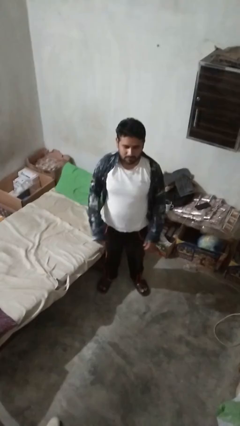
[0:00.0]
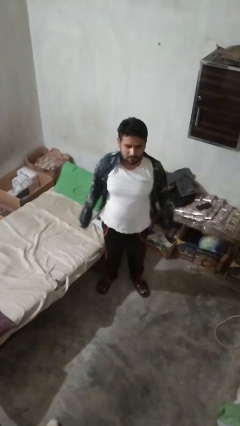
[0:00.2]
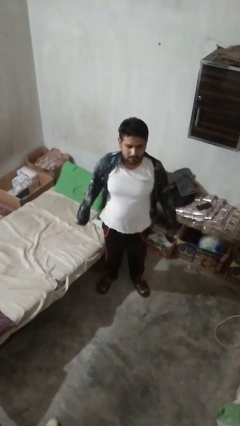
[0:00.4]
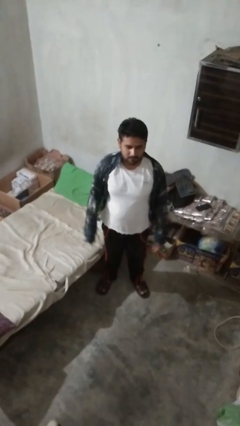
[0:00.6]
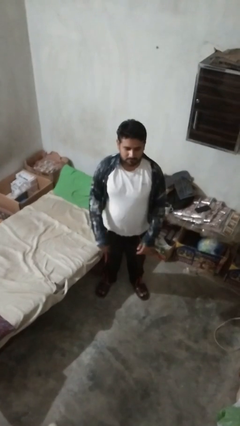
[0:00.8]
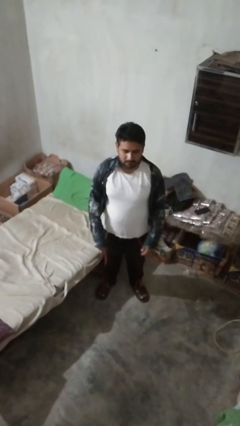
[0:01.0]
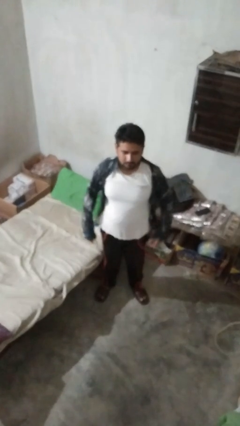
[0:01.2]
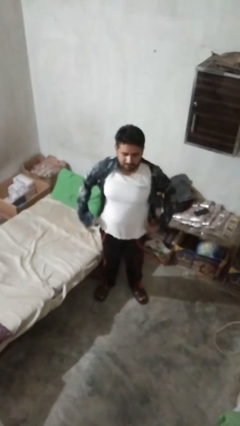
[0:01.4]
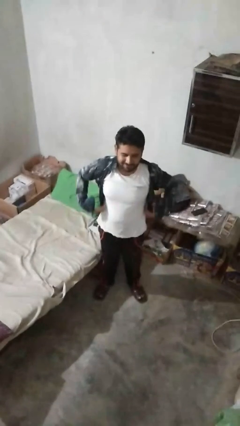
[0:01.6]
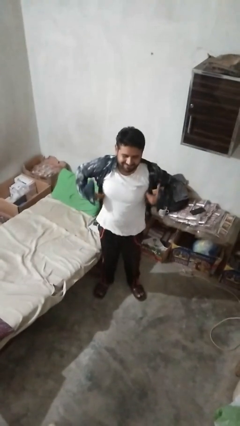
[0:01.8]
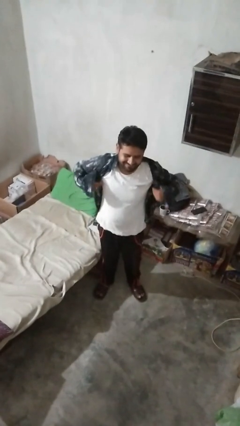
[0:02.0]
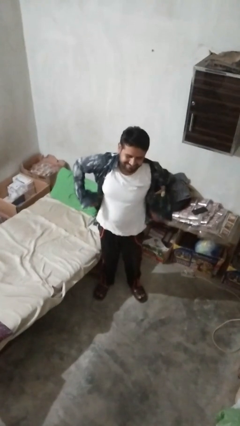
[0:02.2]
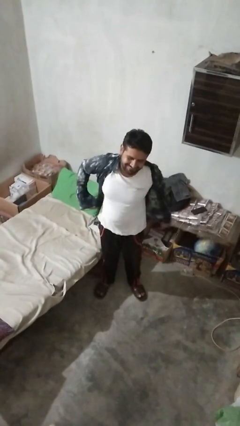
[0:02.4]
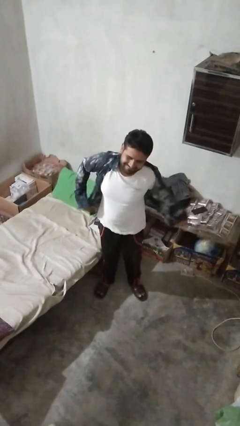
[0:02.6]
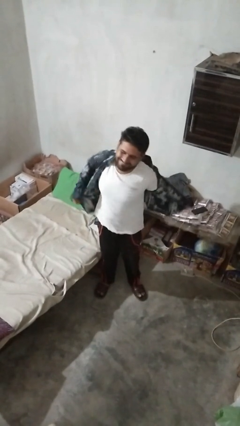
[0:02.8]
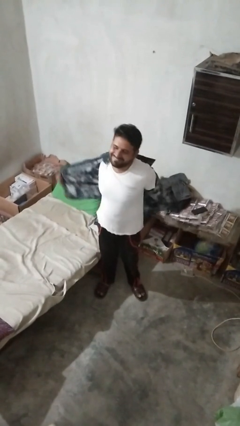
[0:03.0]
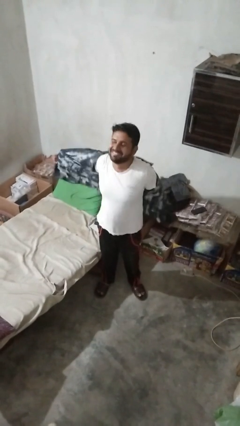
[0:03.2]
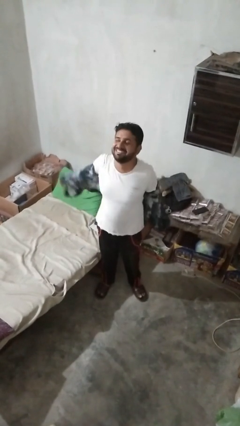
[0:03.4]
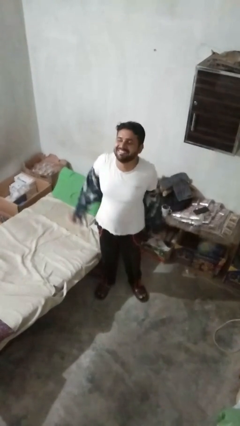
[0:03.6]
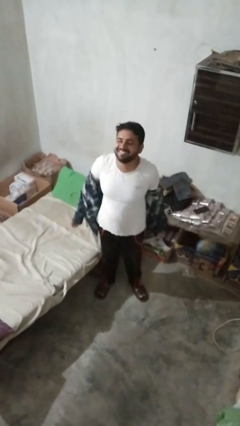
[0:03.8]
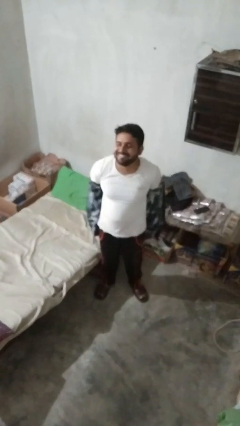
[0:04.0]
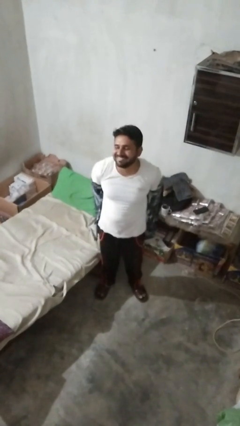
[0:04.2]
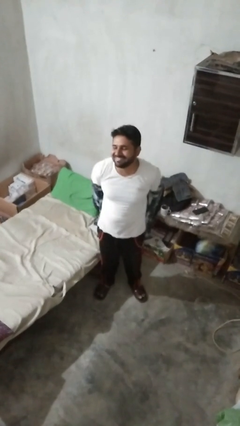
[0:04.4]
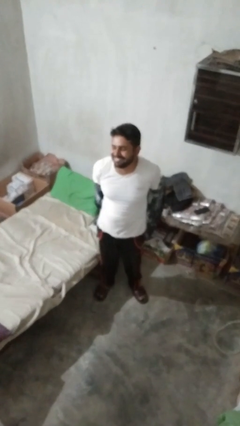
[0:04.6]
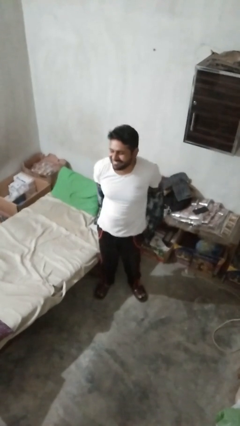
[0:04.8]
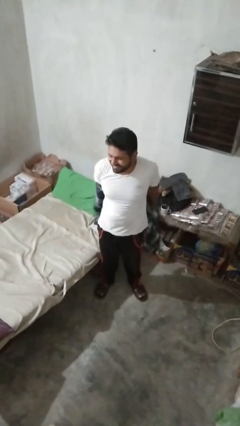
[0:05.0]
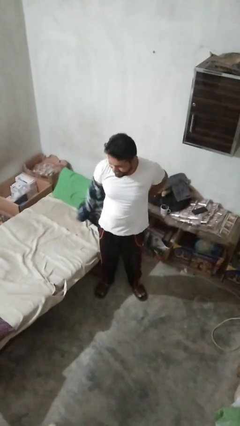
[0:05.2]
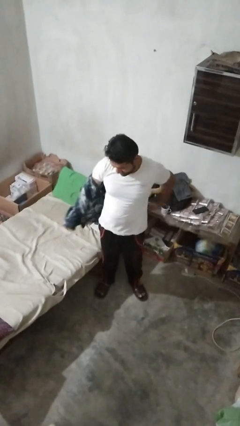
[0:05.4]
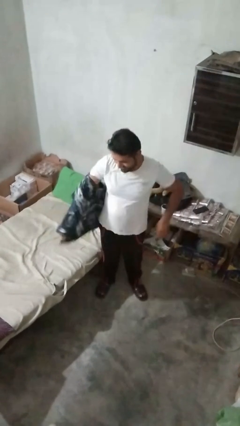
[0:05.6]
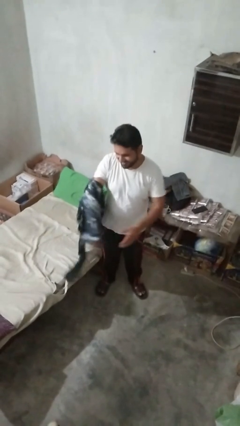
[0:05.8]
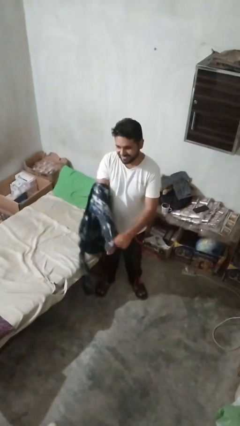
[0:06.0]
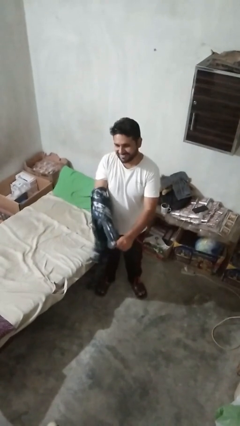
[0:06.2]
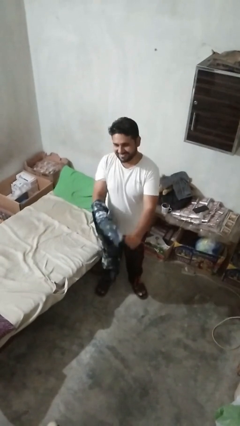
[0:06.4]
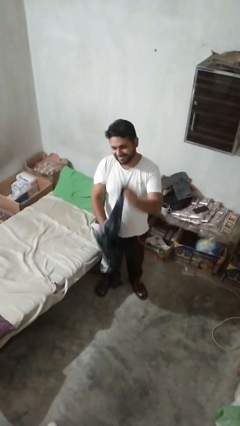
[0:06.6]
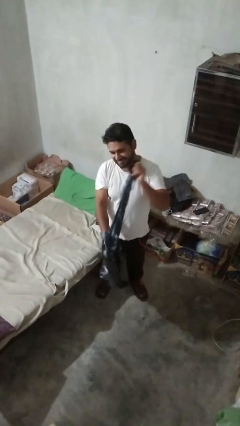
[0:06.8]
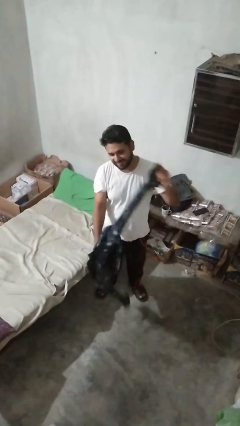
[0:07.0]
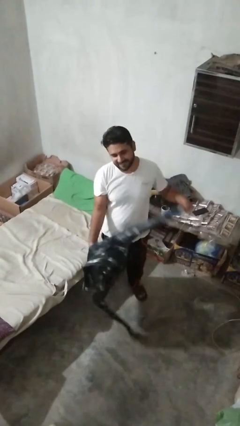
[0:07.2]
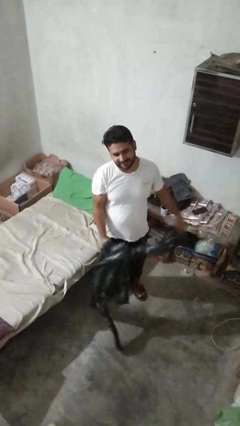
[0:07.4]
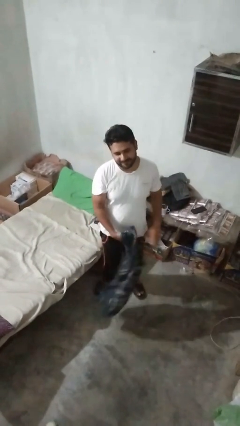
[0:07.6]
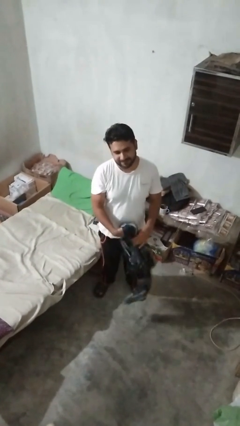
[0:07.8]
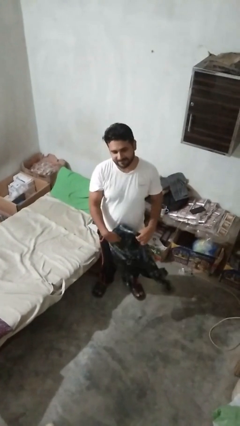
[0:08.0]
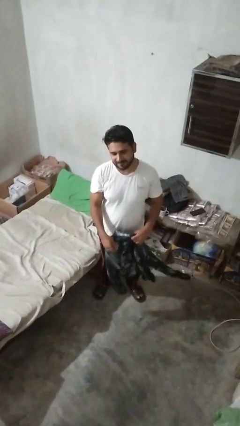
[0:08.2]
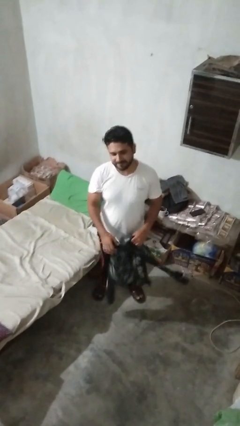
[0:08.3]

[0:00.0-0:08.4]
person takes off shirt

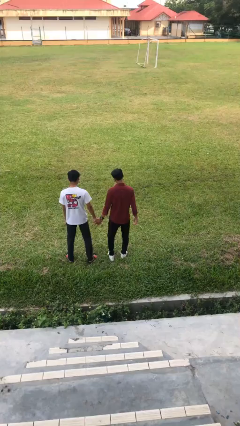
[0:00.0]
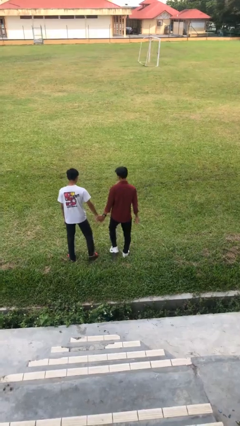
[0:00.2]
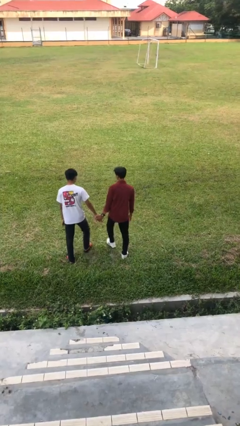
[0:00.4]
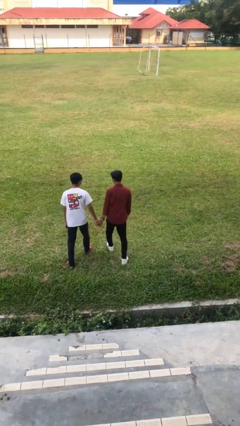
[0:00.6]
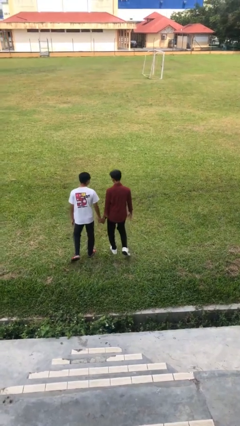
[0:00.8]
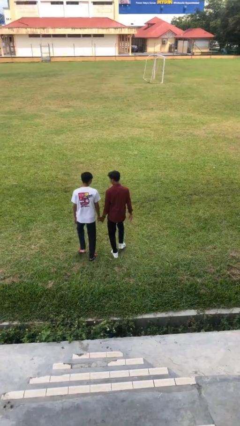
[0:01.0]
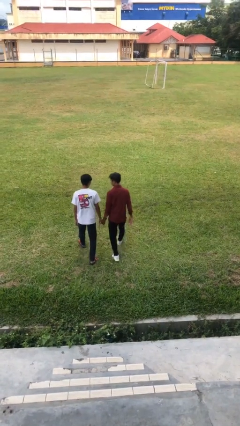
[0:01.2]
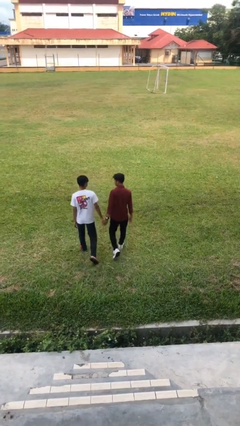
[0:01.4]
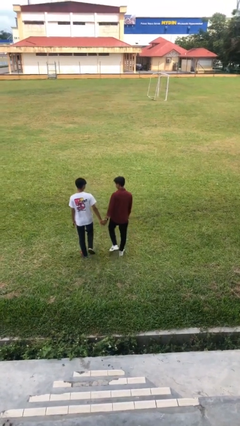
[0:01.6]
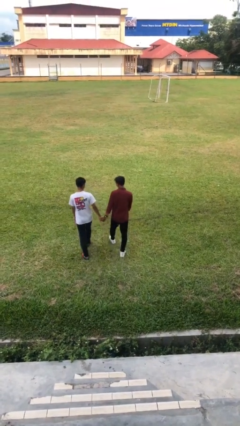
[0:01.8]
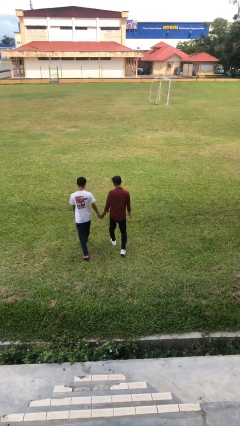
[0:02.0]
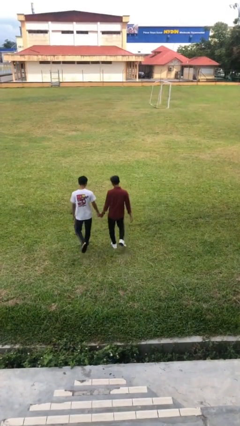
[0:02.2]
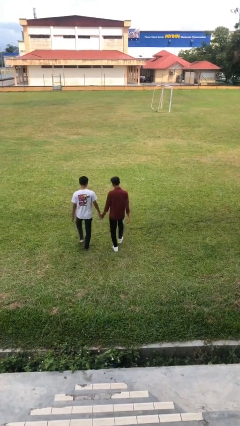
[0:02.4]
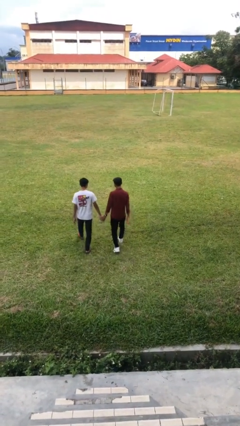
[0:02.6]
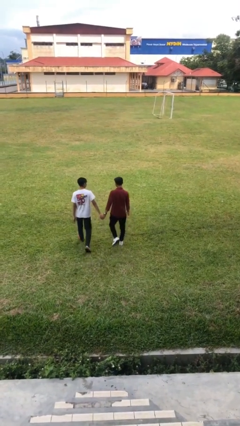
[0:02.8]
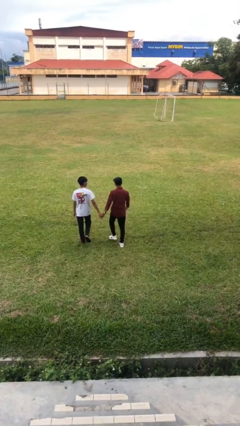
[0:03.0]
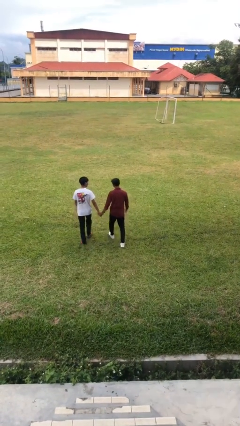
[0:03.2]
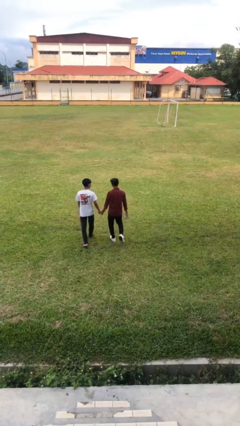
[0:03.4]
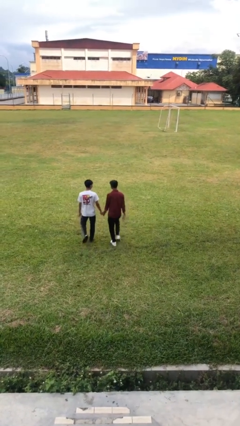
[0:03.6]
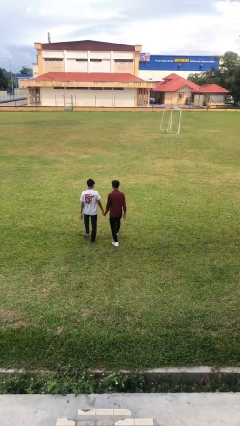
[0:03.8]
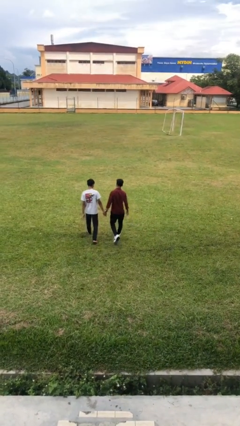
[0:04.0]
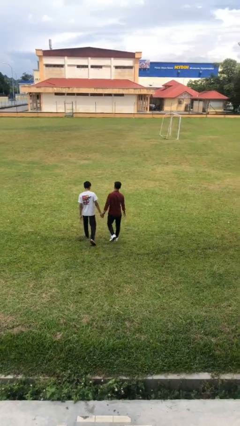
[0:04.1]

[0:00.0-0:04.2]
person holds hand

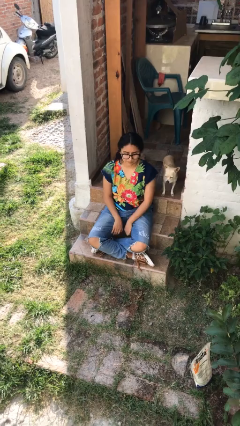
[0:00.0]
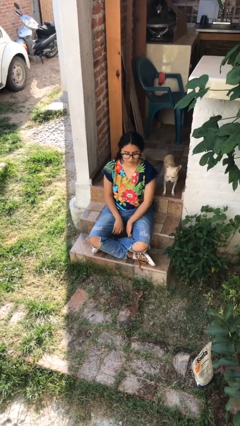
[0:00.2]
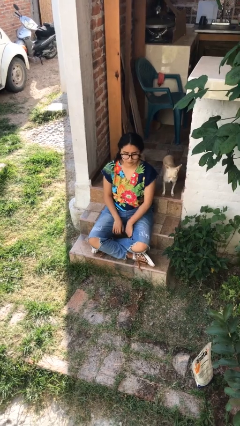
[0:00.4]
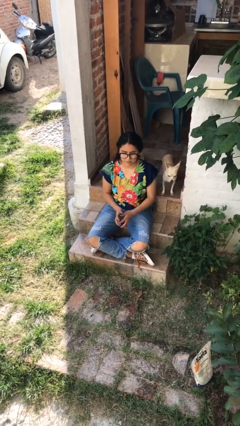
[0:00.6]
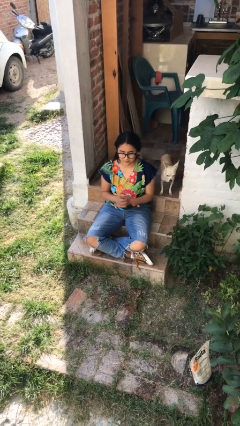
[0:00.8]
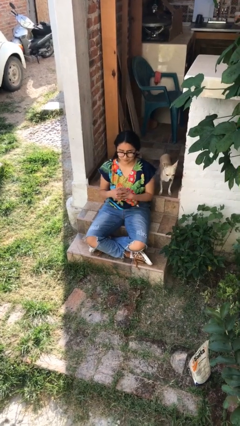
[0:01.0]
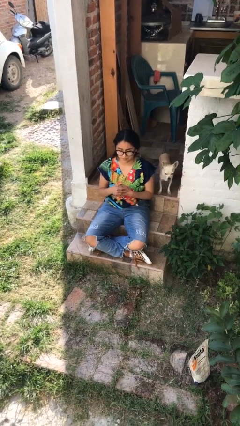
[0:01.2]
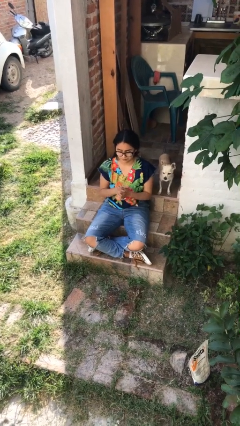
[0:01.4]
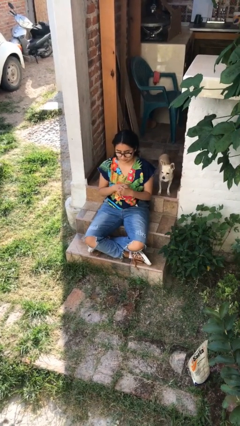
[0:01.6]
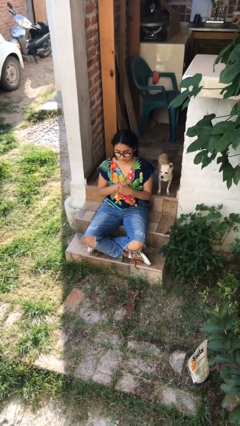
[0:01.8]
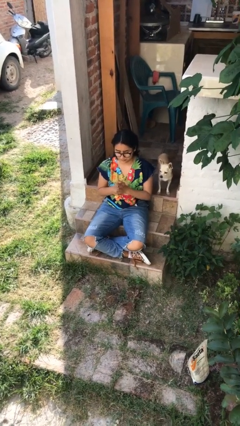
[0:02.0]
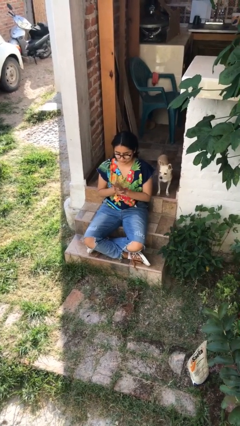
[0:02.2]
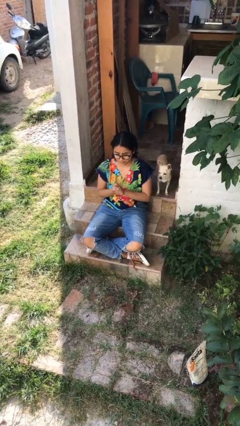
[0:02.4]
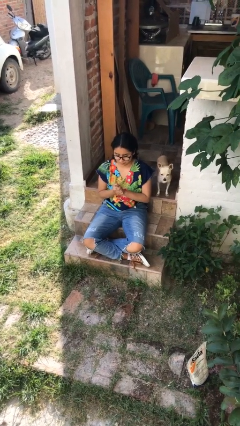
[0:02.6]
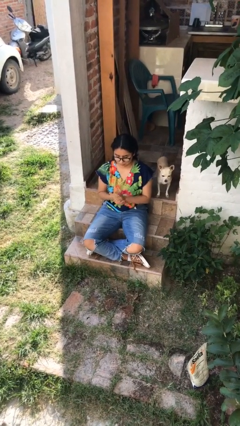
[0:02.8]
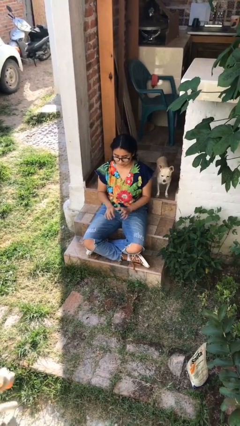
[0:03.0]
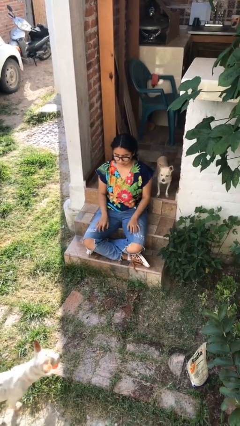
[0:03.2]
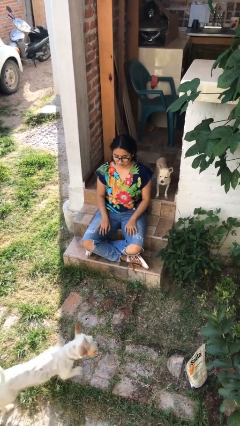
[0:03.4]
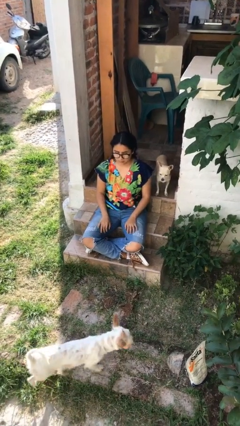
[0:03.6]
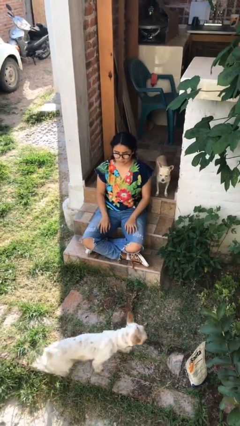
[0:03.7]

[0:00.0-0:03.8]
person cracks knuckles

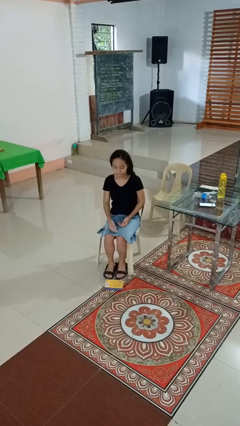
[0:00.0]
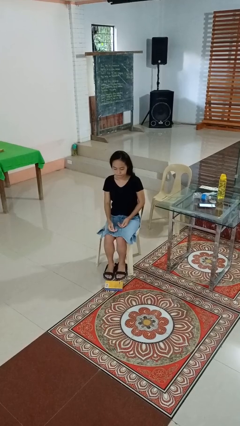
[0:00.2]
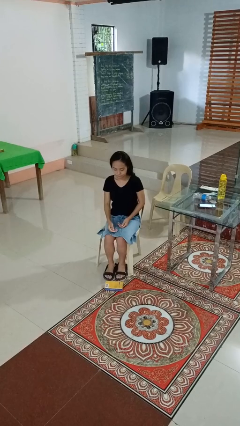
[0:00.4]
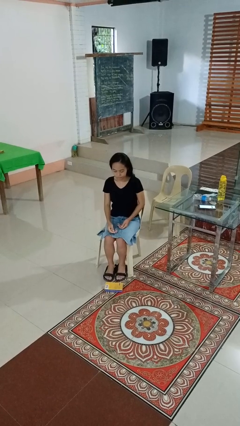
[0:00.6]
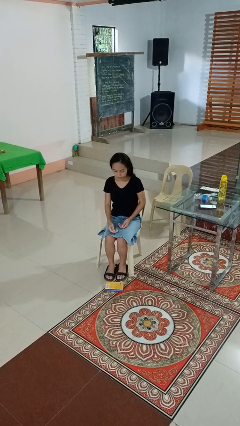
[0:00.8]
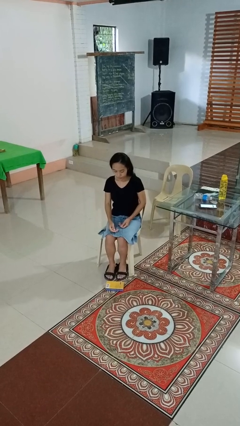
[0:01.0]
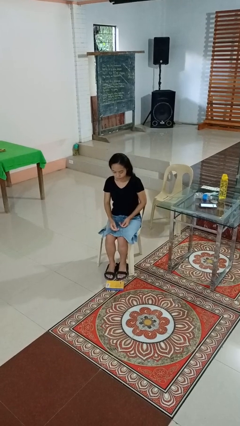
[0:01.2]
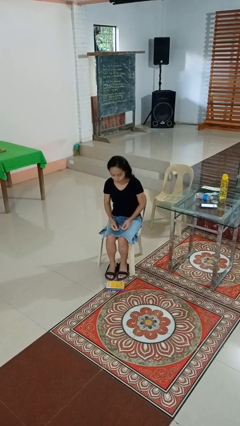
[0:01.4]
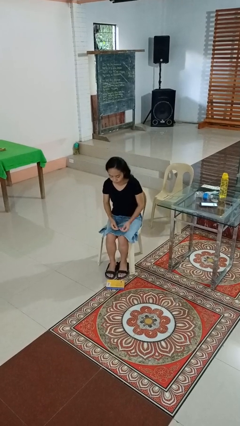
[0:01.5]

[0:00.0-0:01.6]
person drops object
